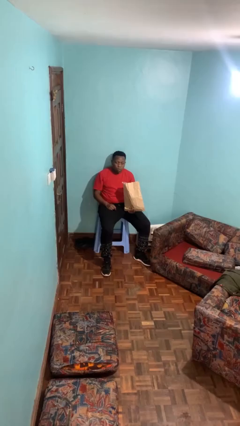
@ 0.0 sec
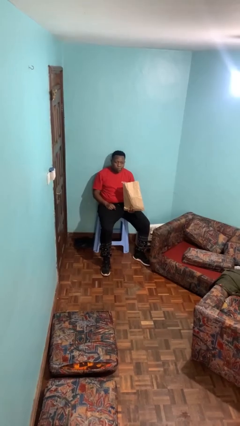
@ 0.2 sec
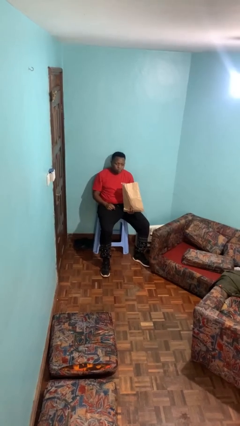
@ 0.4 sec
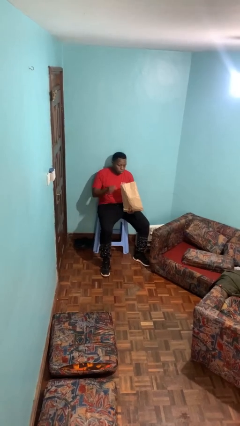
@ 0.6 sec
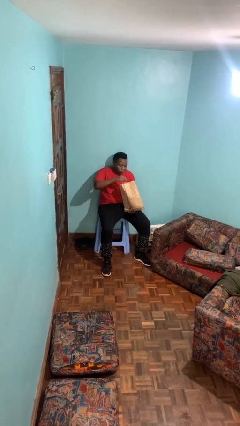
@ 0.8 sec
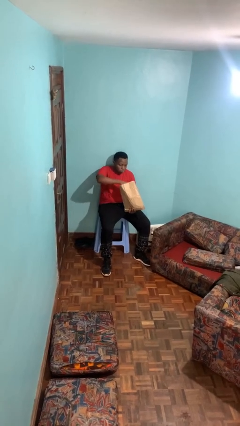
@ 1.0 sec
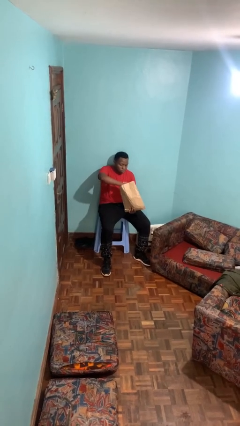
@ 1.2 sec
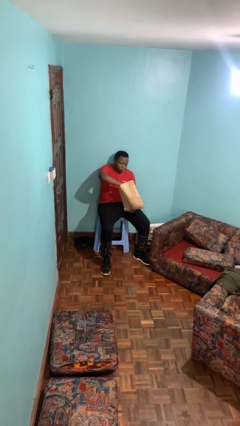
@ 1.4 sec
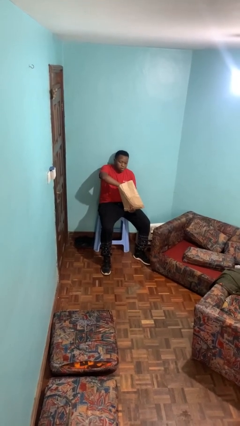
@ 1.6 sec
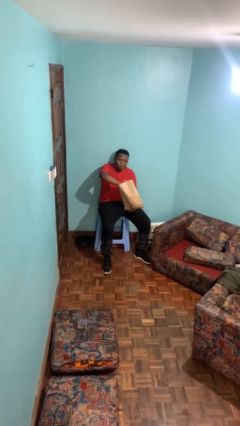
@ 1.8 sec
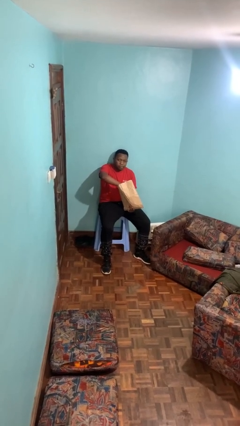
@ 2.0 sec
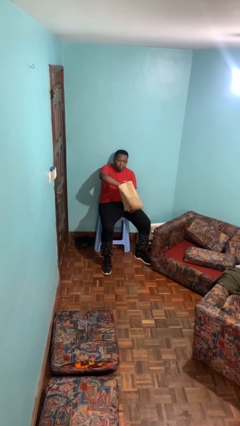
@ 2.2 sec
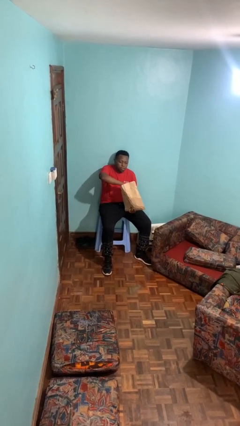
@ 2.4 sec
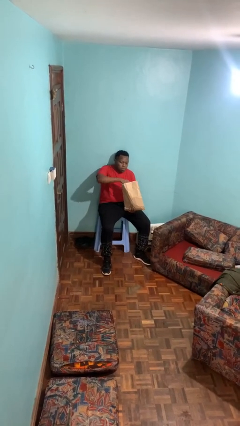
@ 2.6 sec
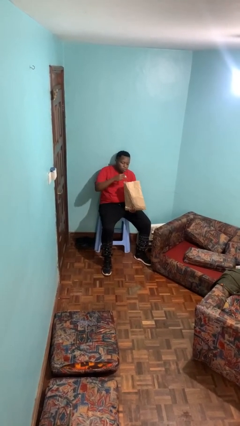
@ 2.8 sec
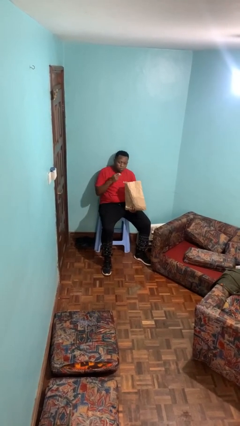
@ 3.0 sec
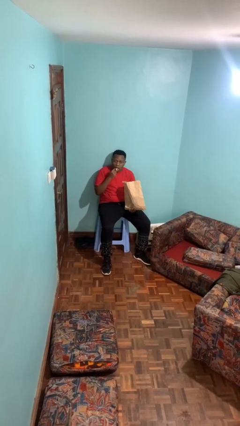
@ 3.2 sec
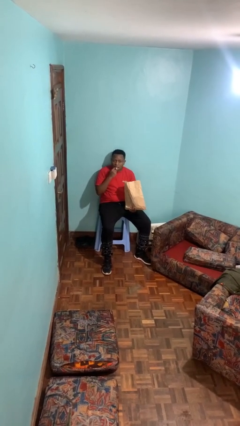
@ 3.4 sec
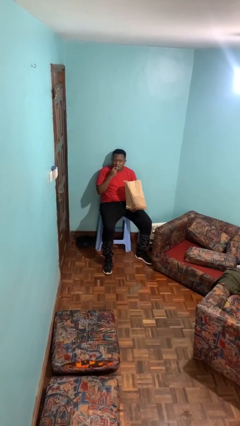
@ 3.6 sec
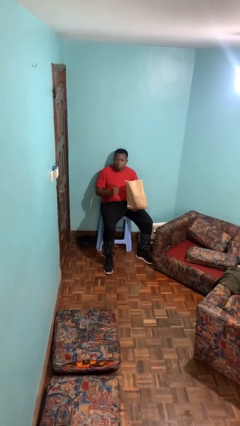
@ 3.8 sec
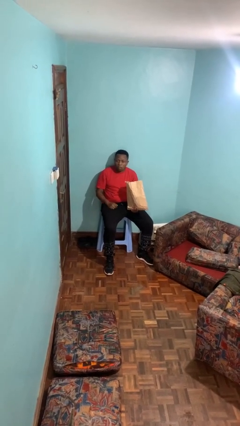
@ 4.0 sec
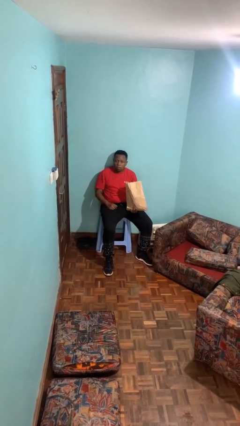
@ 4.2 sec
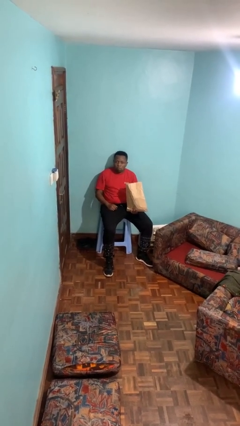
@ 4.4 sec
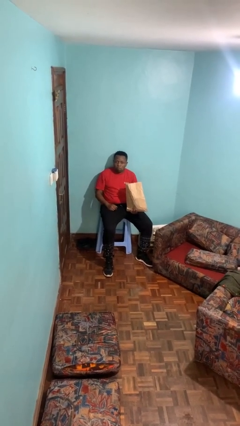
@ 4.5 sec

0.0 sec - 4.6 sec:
person eats snack from bag

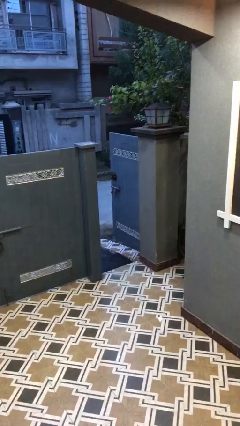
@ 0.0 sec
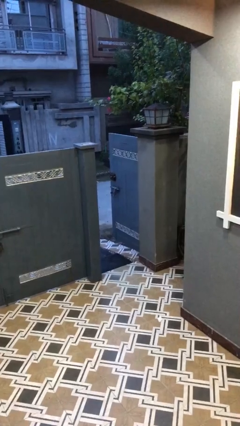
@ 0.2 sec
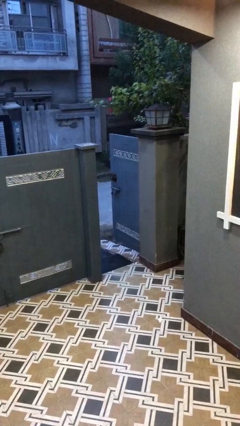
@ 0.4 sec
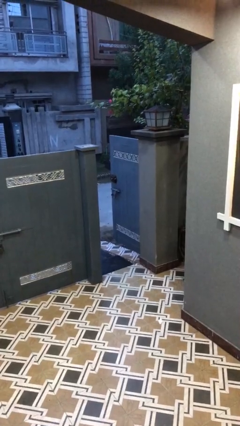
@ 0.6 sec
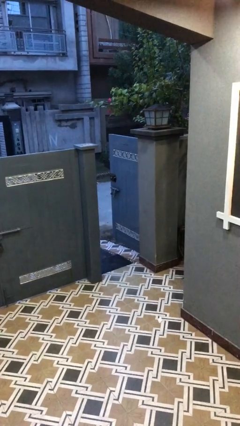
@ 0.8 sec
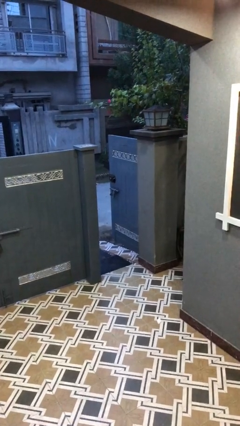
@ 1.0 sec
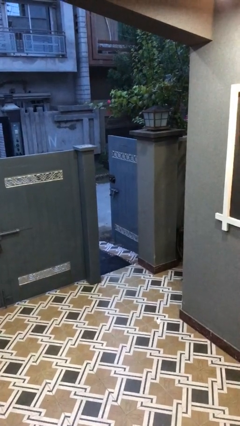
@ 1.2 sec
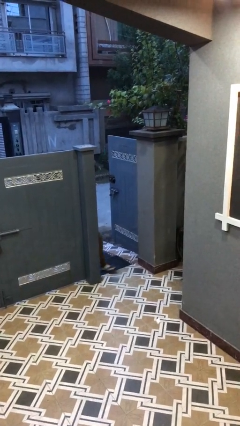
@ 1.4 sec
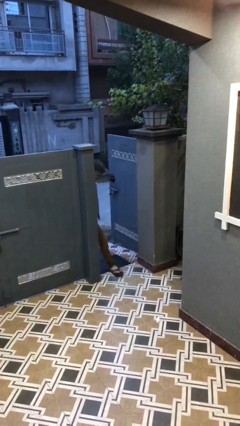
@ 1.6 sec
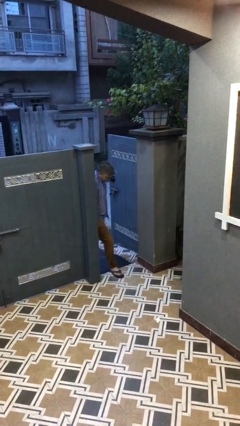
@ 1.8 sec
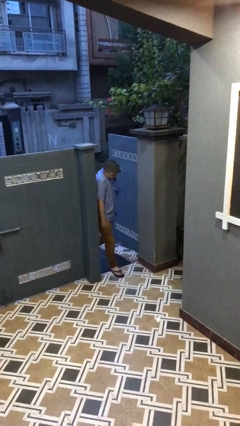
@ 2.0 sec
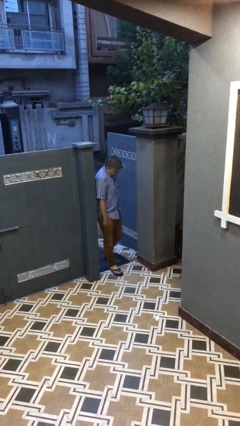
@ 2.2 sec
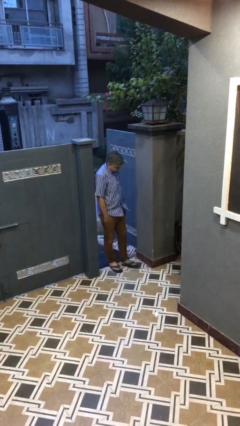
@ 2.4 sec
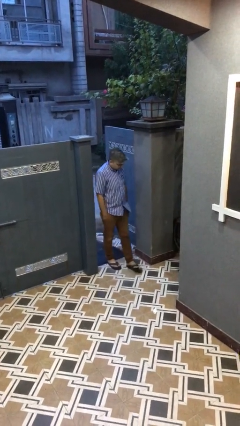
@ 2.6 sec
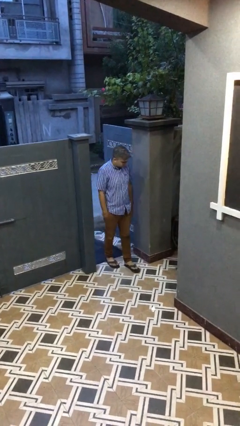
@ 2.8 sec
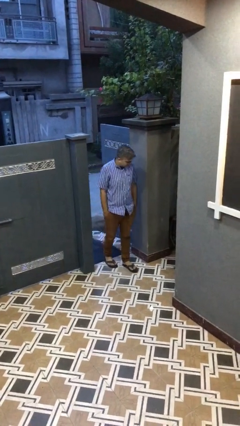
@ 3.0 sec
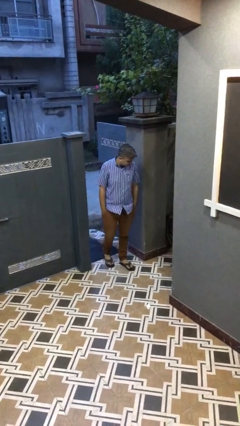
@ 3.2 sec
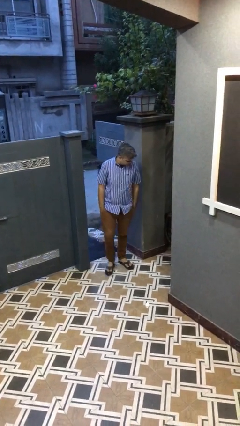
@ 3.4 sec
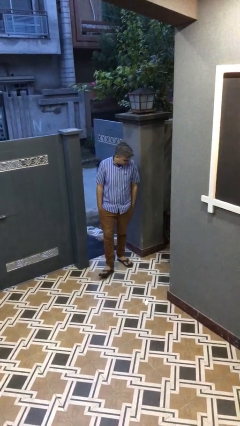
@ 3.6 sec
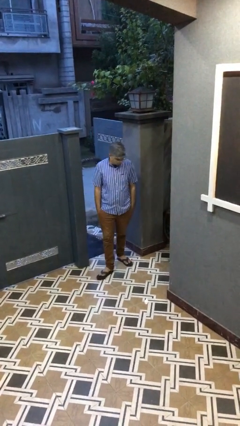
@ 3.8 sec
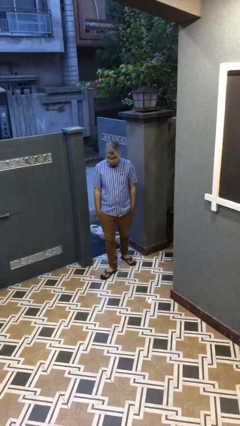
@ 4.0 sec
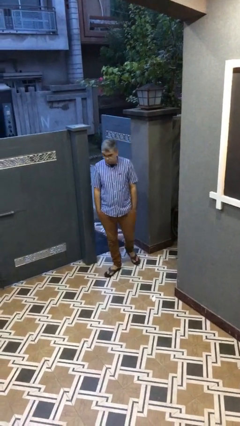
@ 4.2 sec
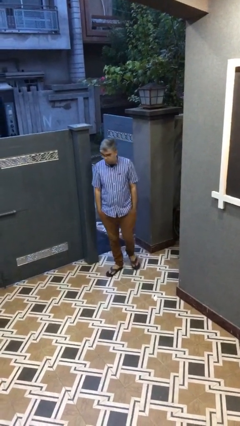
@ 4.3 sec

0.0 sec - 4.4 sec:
person enters scene through structure

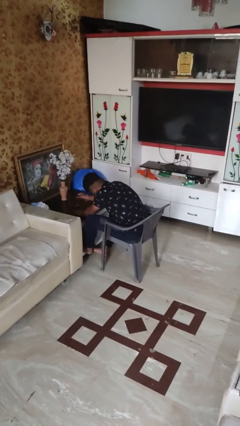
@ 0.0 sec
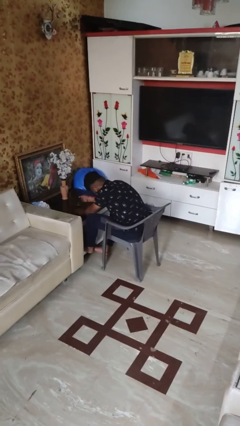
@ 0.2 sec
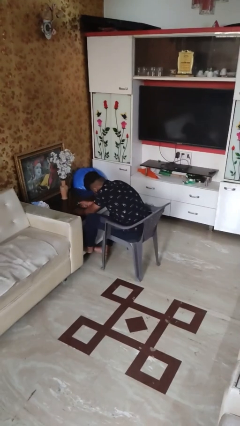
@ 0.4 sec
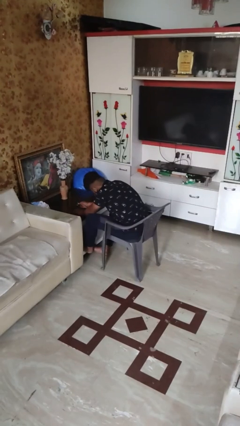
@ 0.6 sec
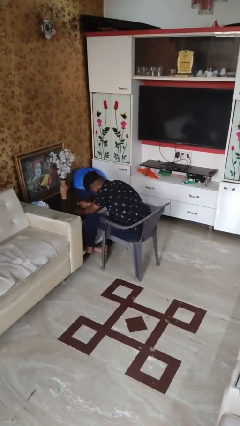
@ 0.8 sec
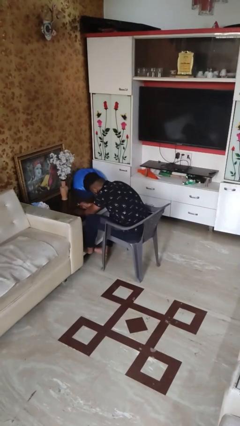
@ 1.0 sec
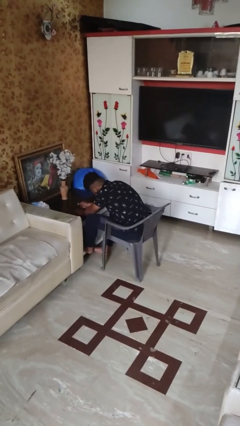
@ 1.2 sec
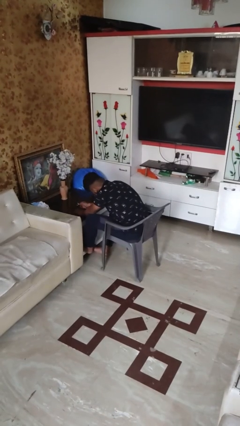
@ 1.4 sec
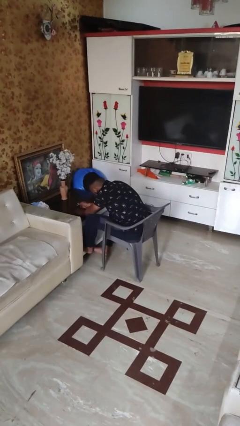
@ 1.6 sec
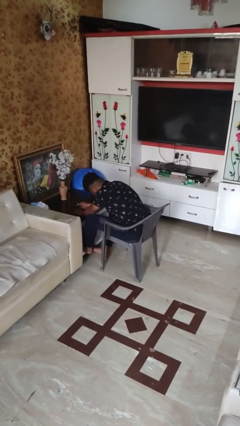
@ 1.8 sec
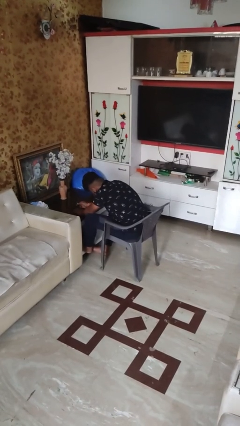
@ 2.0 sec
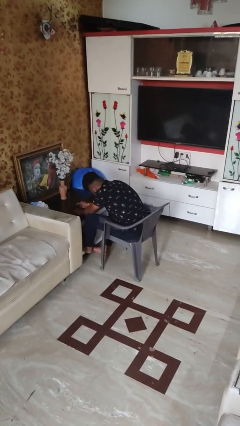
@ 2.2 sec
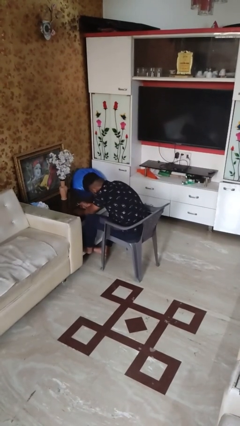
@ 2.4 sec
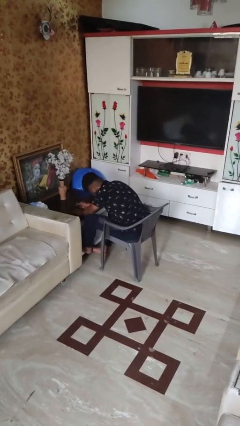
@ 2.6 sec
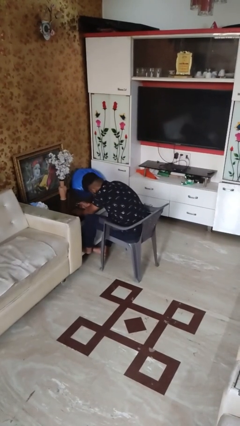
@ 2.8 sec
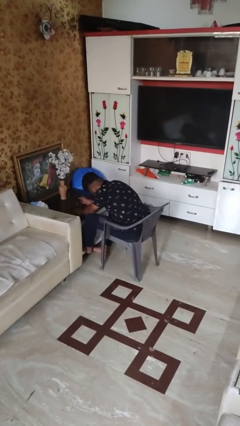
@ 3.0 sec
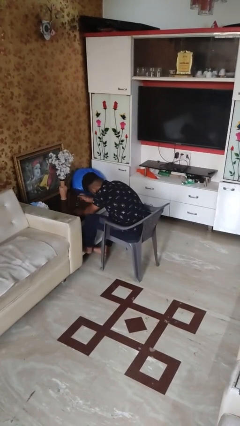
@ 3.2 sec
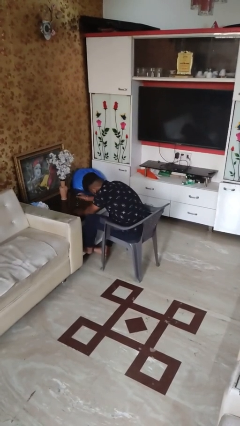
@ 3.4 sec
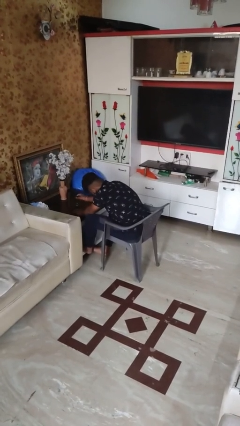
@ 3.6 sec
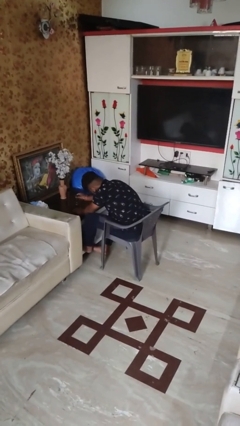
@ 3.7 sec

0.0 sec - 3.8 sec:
person paints fingernails

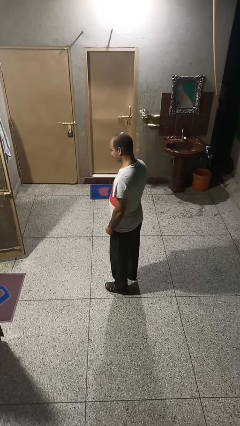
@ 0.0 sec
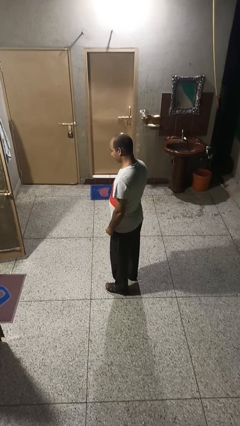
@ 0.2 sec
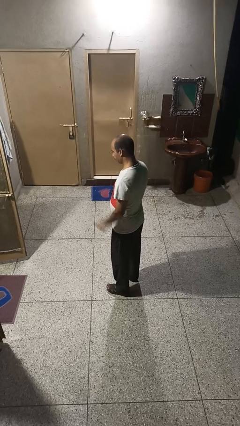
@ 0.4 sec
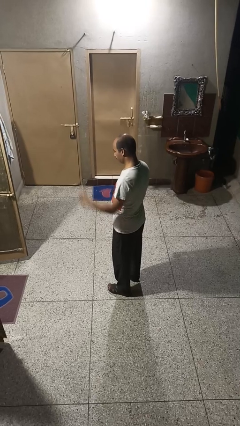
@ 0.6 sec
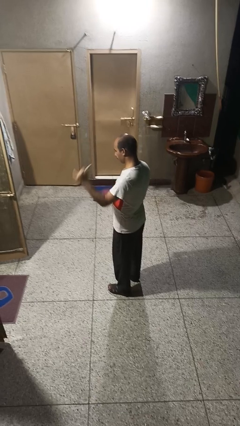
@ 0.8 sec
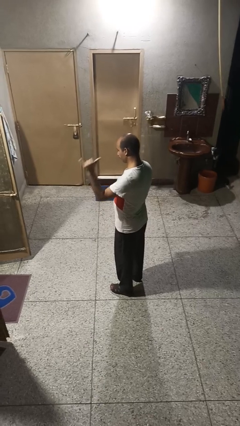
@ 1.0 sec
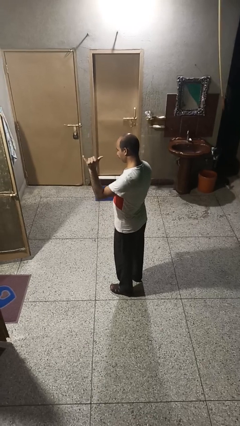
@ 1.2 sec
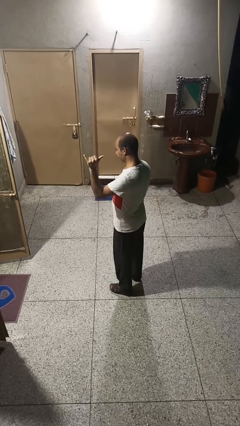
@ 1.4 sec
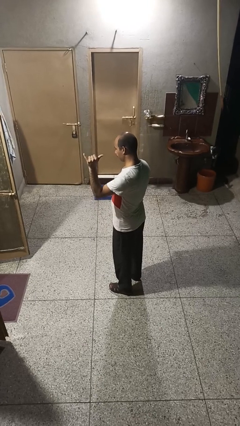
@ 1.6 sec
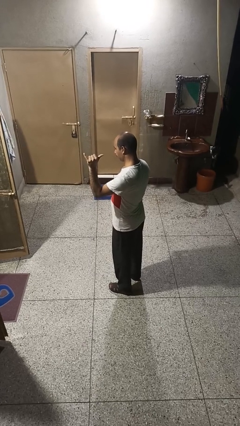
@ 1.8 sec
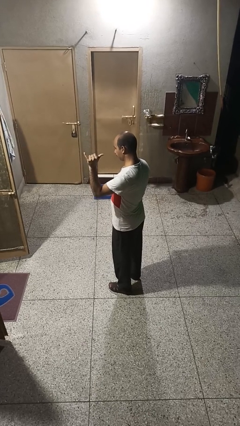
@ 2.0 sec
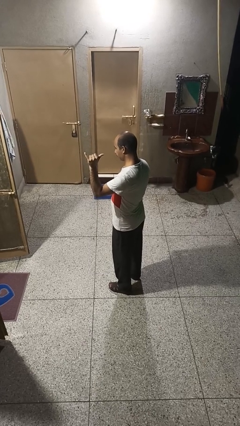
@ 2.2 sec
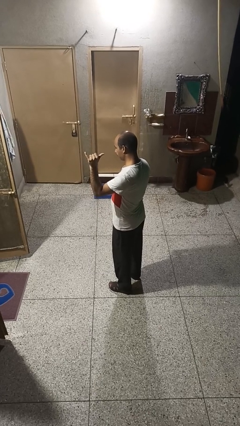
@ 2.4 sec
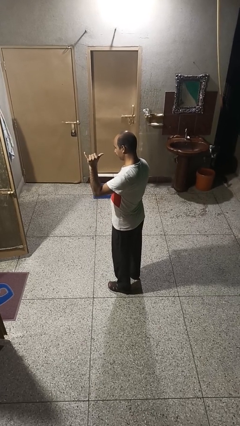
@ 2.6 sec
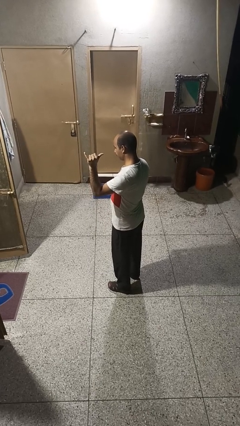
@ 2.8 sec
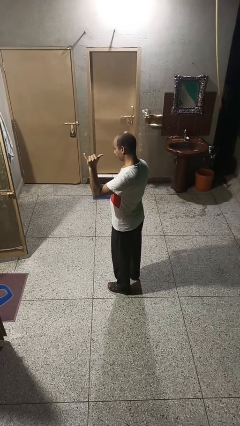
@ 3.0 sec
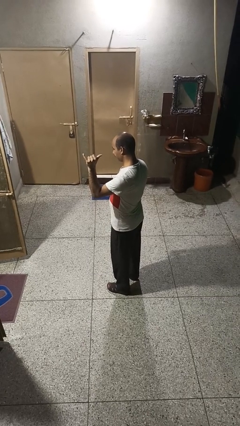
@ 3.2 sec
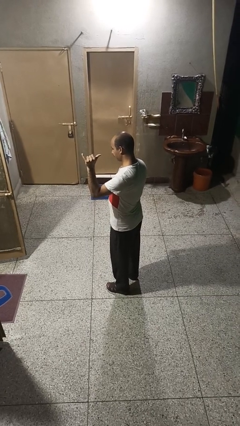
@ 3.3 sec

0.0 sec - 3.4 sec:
person gestures hang loose

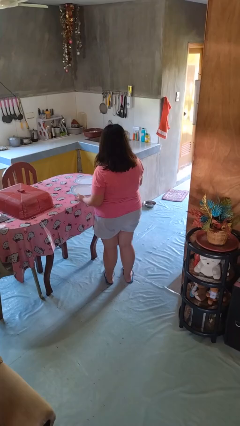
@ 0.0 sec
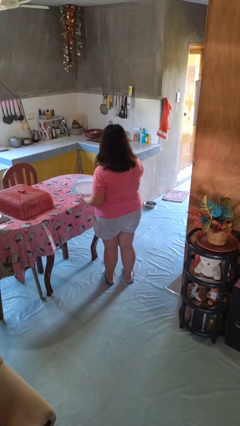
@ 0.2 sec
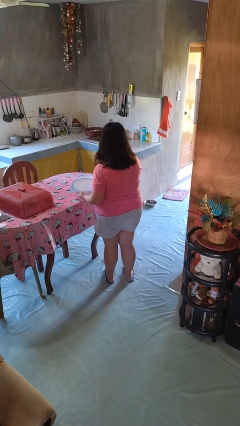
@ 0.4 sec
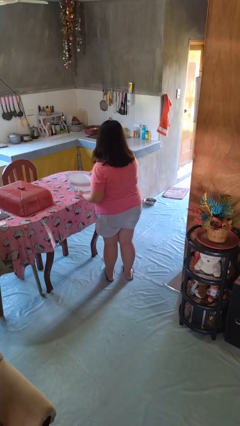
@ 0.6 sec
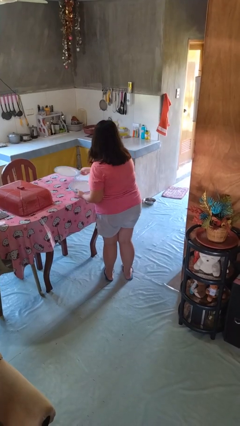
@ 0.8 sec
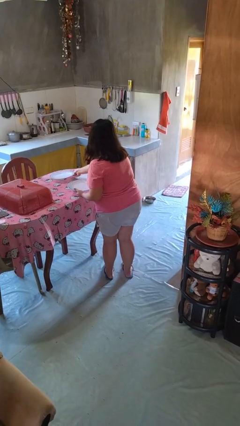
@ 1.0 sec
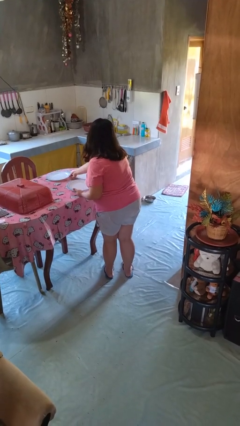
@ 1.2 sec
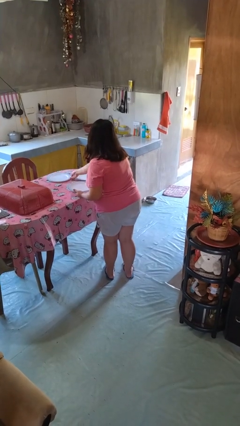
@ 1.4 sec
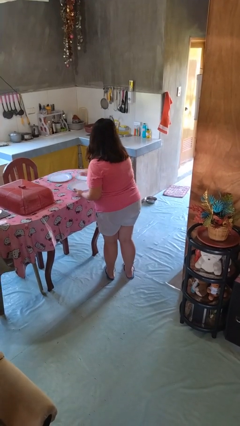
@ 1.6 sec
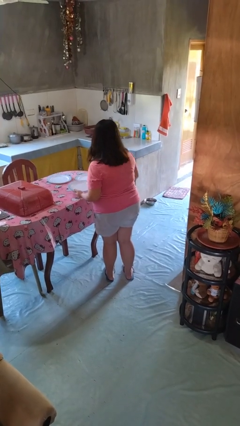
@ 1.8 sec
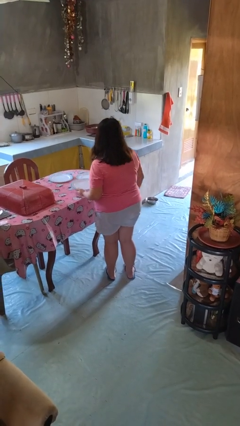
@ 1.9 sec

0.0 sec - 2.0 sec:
person sets table
